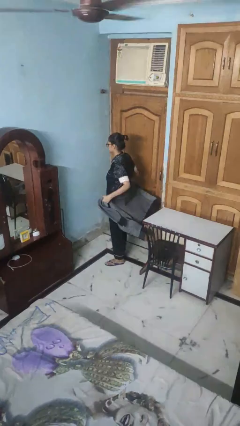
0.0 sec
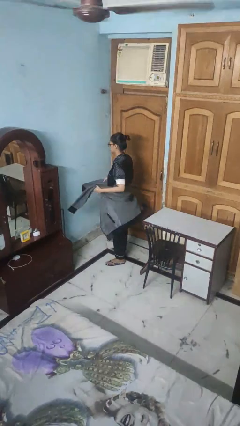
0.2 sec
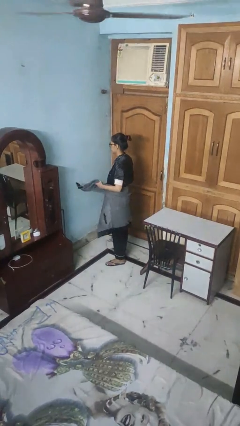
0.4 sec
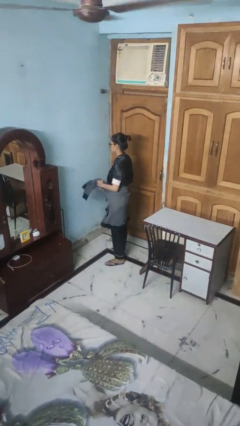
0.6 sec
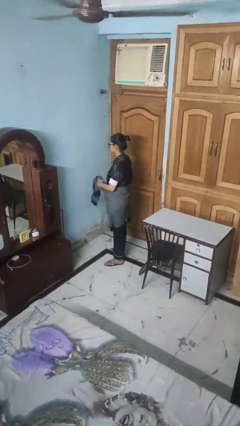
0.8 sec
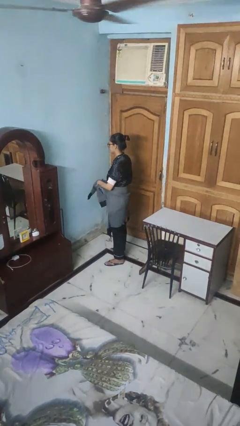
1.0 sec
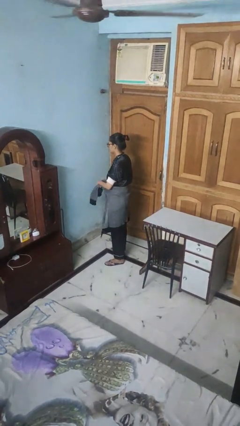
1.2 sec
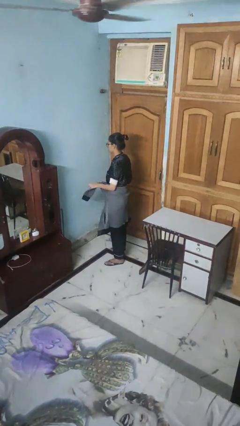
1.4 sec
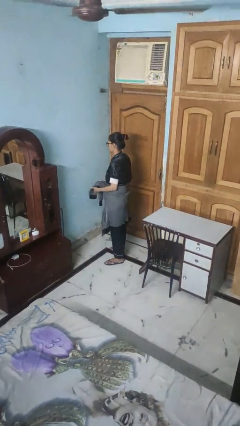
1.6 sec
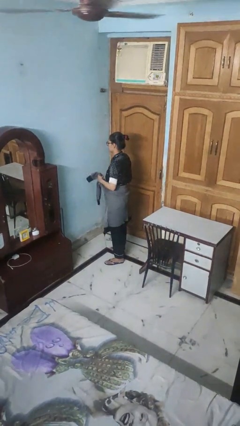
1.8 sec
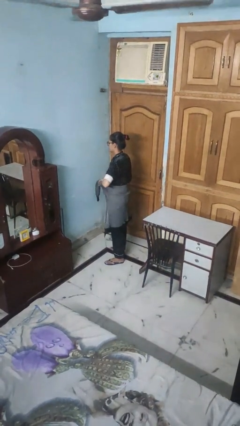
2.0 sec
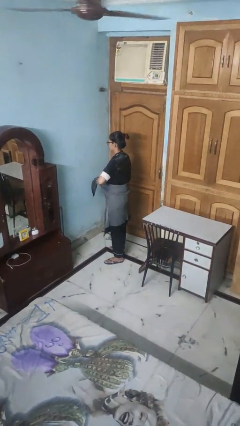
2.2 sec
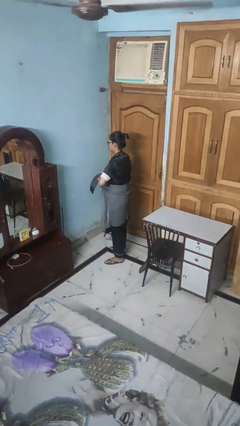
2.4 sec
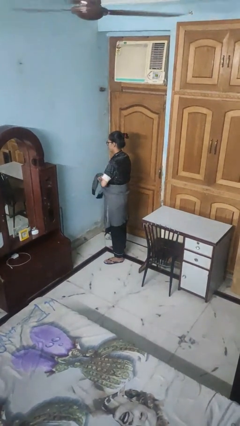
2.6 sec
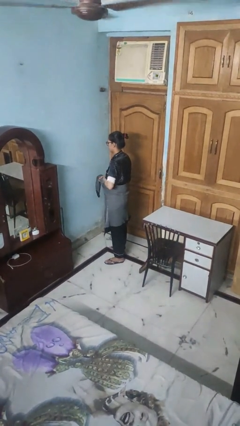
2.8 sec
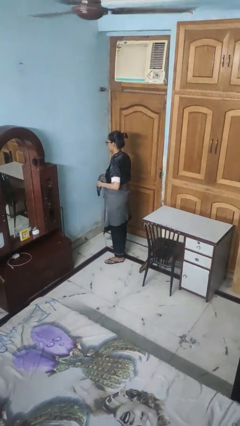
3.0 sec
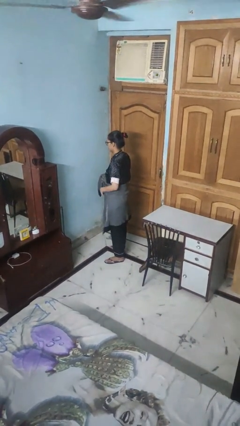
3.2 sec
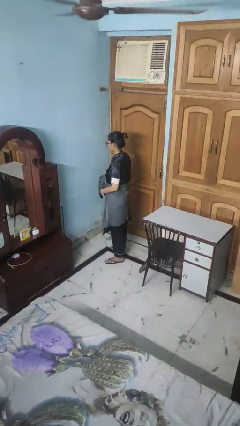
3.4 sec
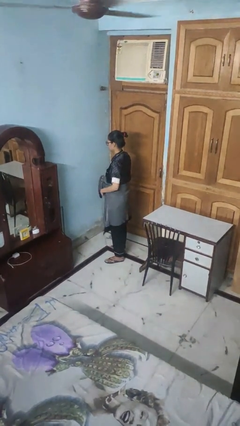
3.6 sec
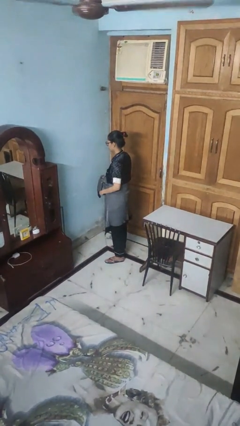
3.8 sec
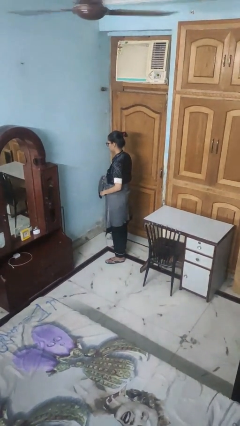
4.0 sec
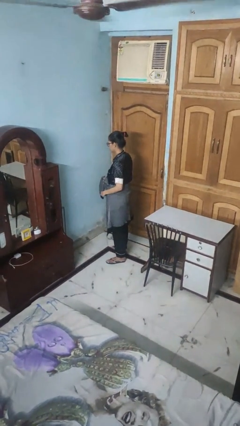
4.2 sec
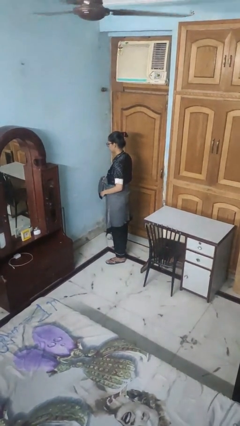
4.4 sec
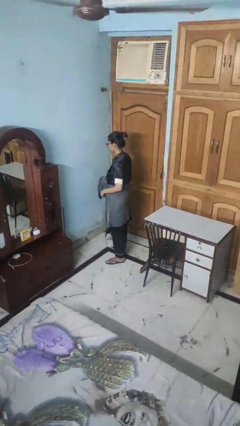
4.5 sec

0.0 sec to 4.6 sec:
person ties jacket around waist

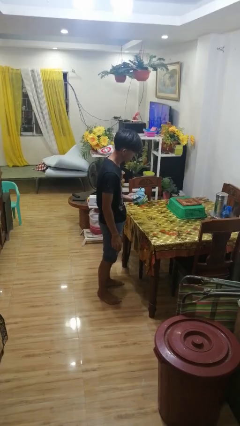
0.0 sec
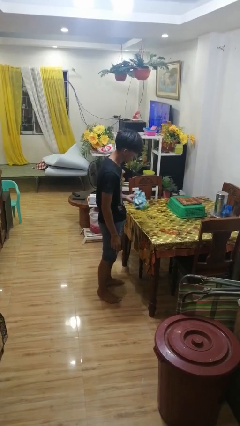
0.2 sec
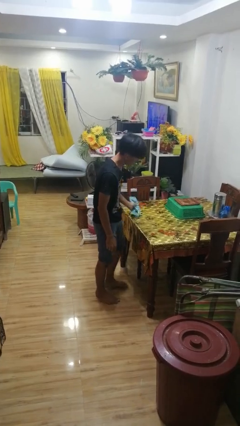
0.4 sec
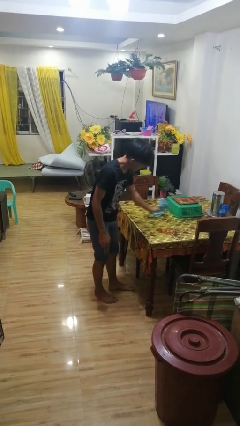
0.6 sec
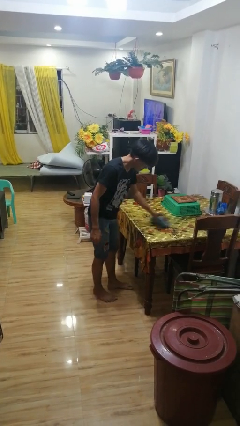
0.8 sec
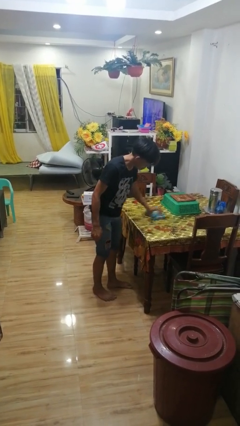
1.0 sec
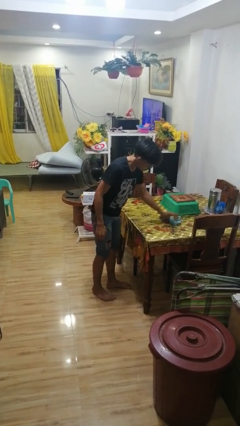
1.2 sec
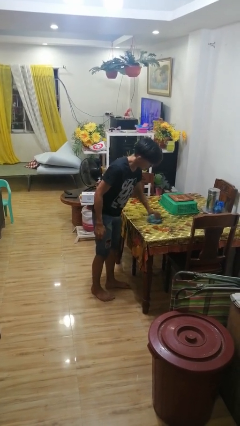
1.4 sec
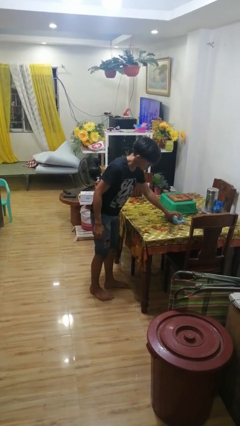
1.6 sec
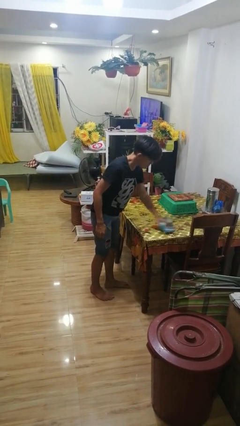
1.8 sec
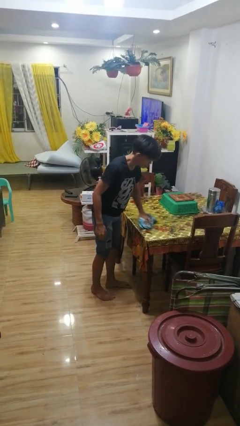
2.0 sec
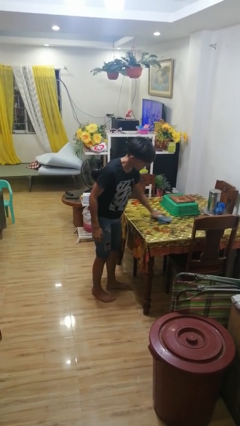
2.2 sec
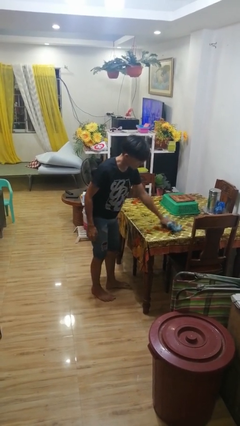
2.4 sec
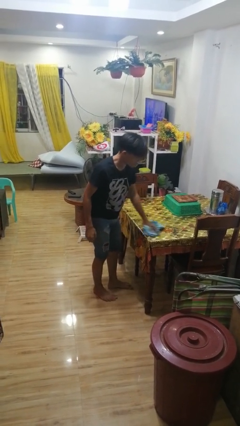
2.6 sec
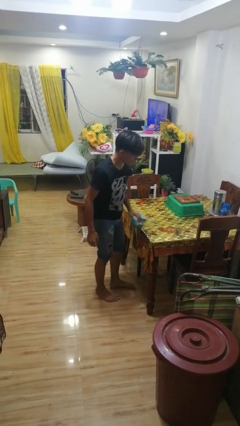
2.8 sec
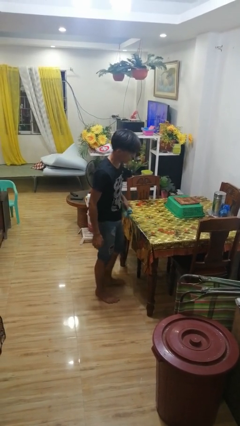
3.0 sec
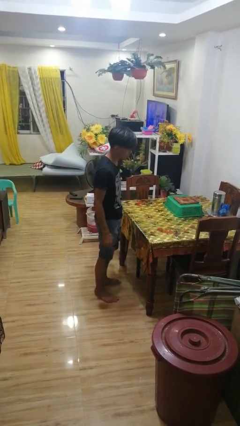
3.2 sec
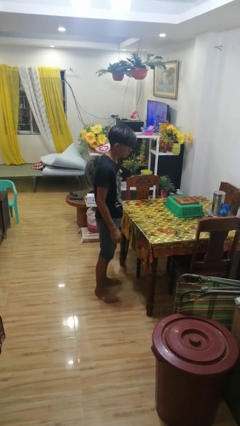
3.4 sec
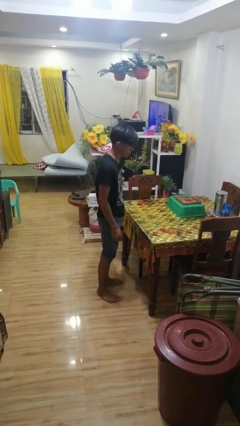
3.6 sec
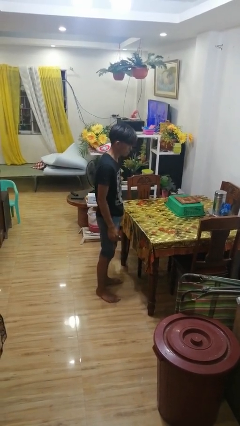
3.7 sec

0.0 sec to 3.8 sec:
person cleans table with rag

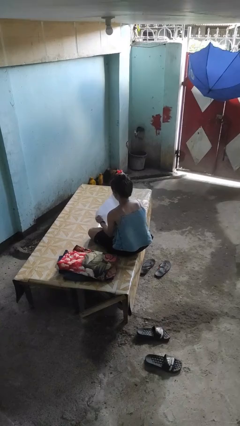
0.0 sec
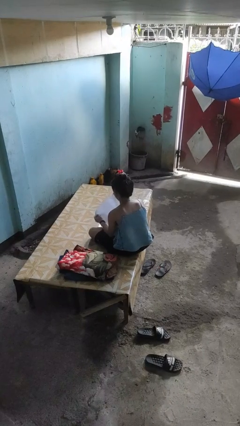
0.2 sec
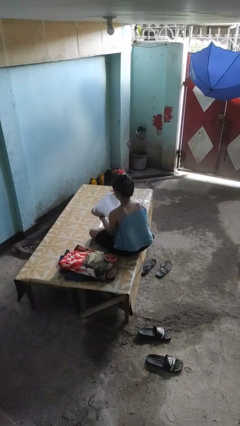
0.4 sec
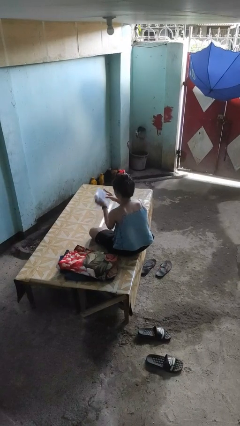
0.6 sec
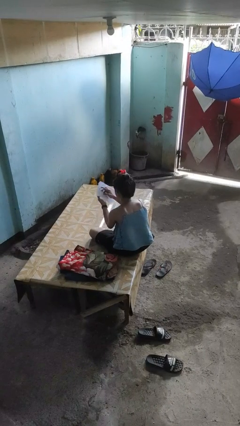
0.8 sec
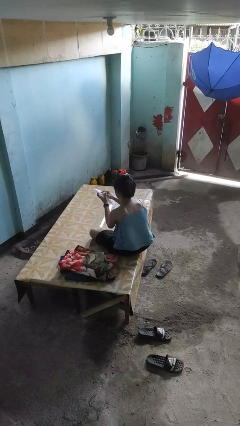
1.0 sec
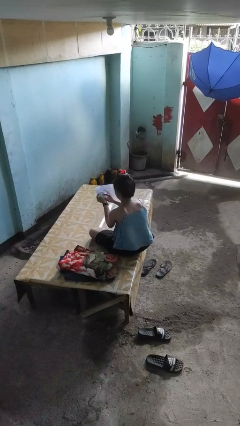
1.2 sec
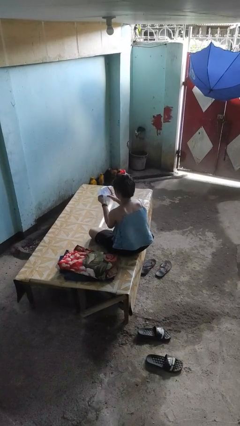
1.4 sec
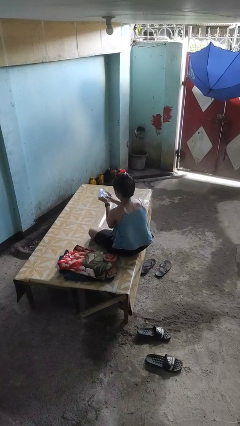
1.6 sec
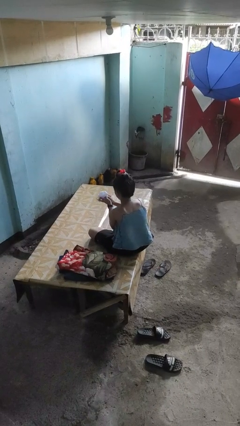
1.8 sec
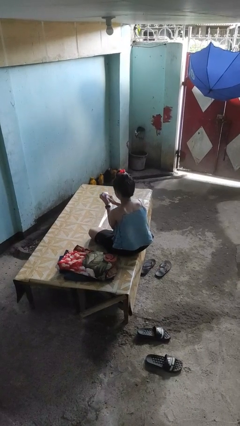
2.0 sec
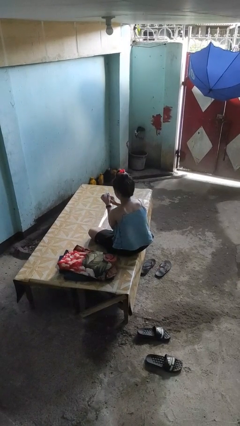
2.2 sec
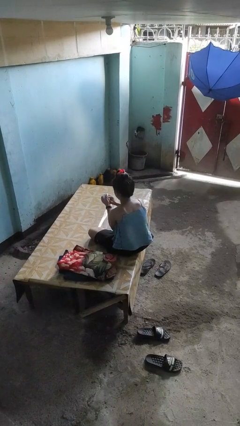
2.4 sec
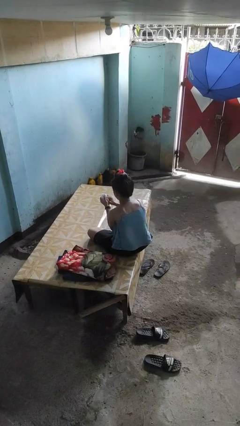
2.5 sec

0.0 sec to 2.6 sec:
person crumples paper

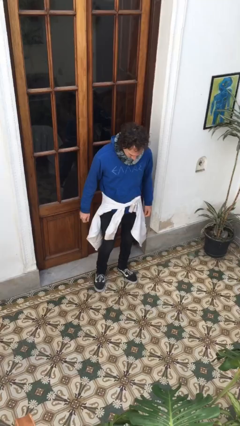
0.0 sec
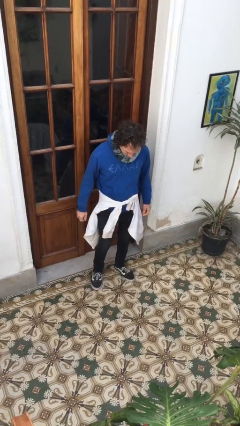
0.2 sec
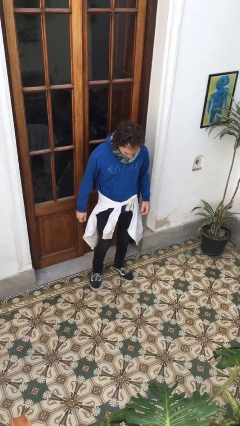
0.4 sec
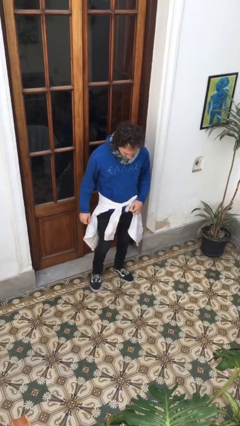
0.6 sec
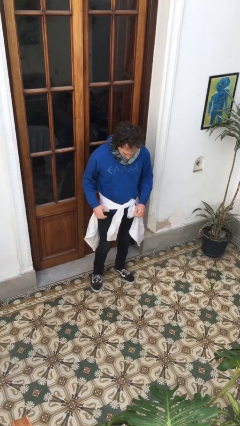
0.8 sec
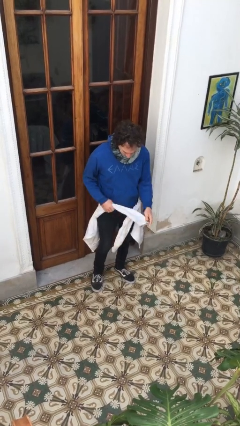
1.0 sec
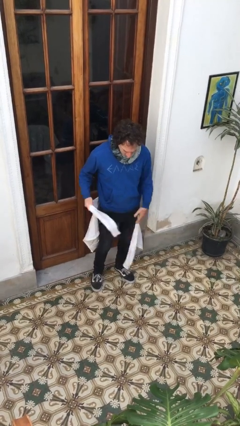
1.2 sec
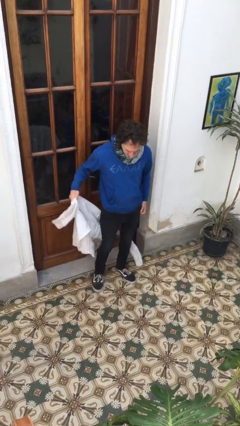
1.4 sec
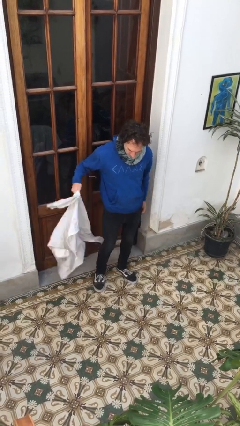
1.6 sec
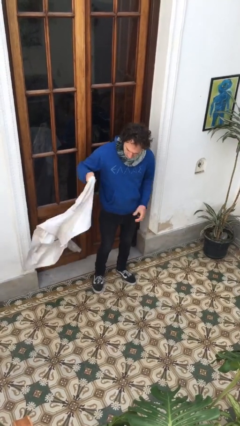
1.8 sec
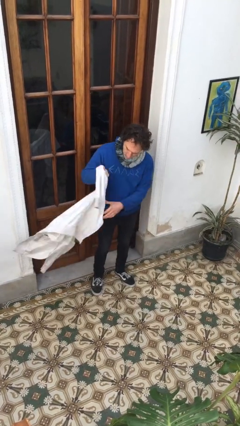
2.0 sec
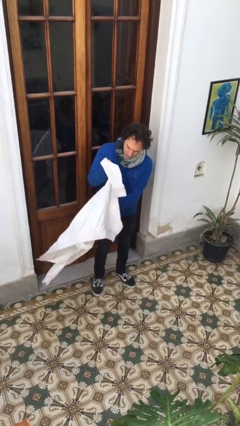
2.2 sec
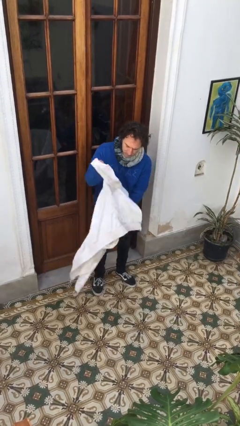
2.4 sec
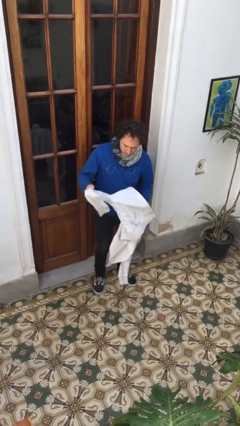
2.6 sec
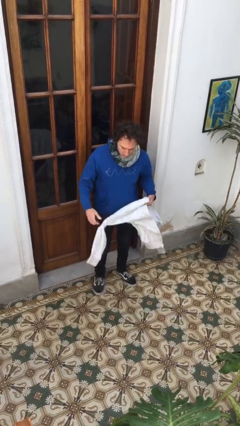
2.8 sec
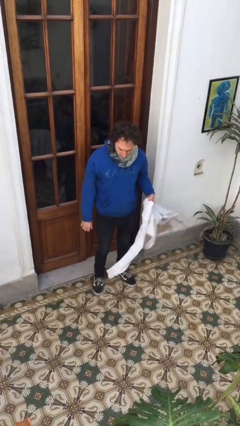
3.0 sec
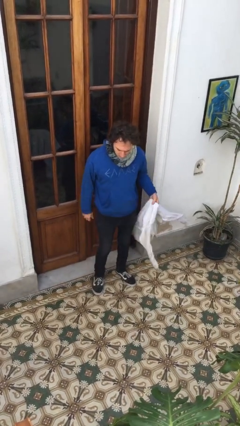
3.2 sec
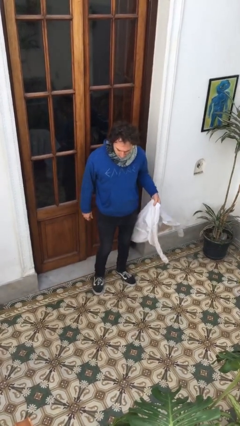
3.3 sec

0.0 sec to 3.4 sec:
person unties jacket around waist

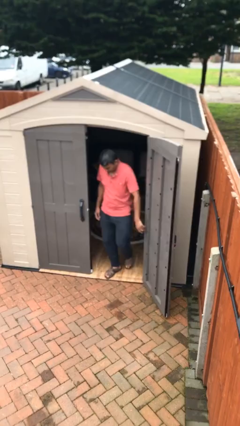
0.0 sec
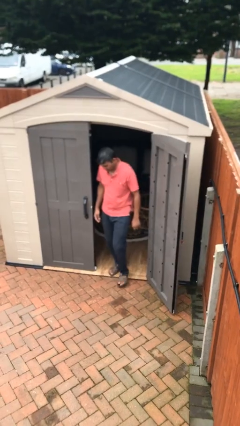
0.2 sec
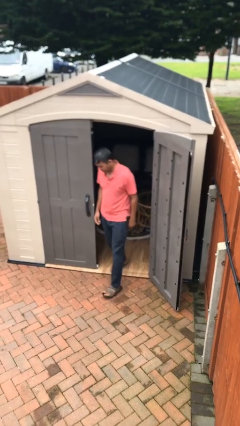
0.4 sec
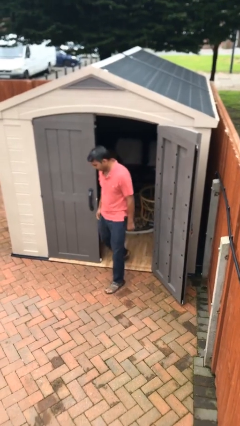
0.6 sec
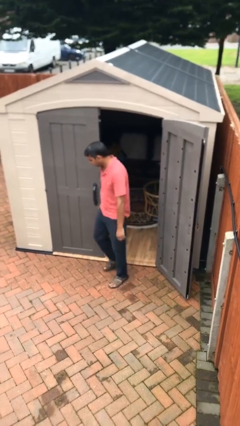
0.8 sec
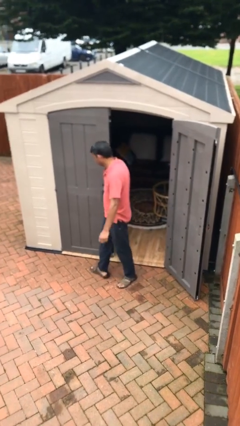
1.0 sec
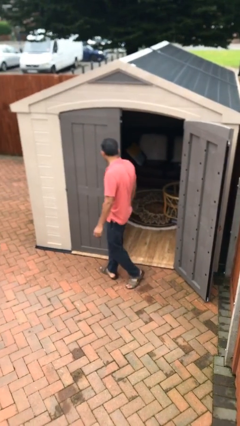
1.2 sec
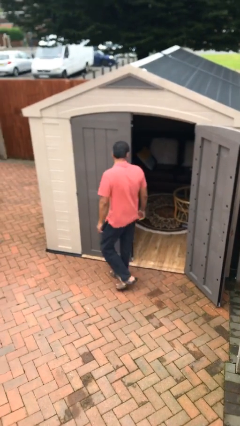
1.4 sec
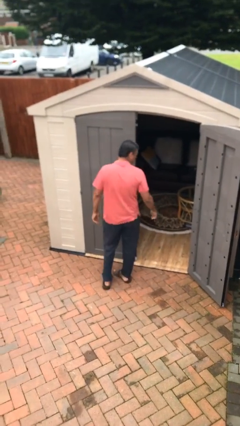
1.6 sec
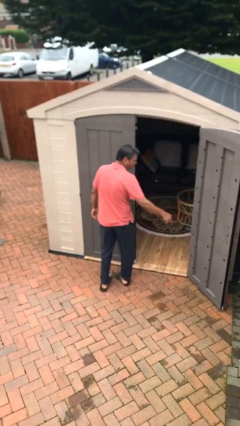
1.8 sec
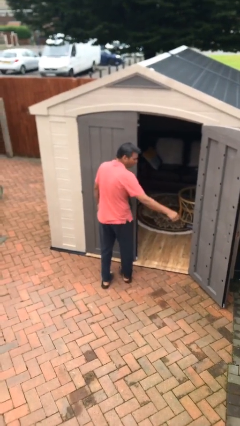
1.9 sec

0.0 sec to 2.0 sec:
person enters scene through structure

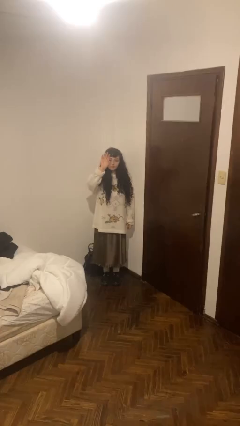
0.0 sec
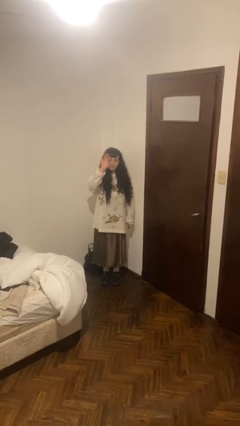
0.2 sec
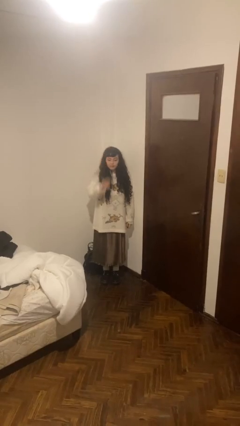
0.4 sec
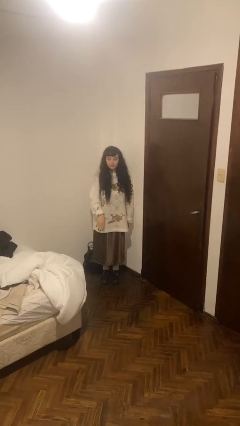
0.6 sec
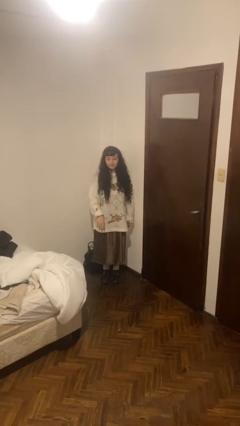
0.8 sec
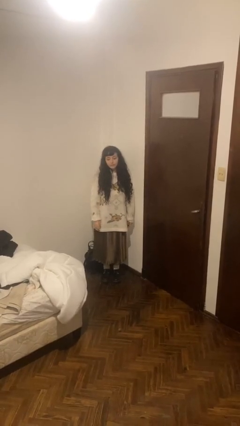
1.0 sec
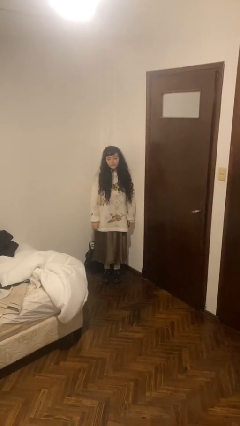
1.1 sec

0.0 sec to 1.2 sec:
person gestures swipe down

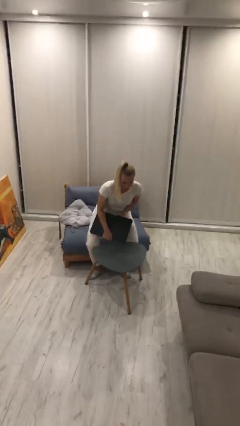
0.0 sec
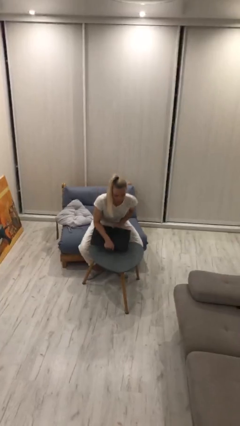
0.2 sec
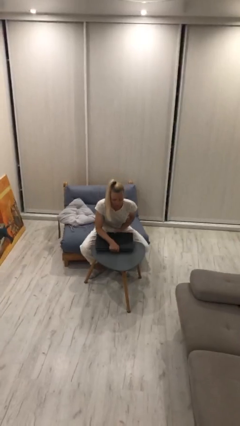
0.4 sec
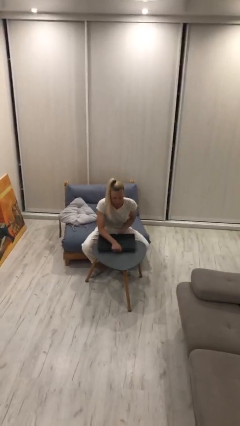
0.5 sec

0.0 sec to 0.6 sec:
person sits down
